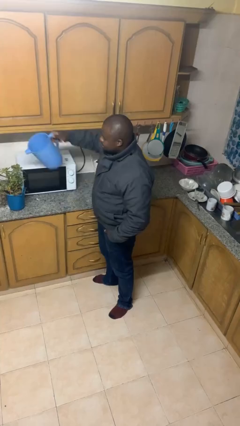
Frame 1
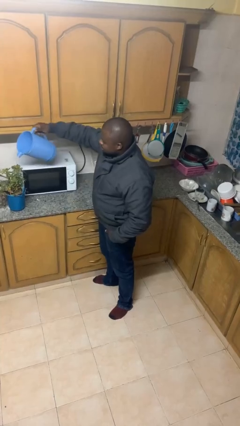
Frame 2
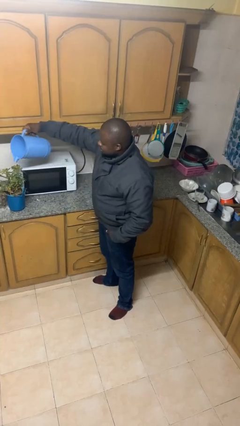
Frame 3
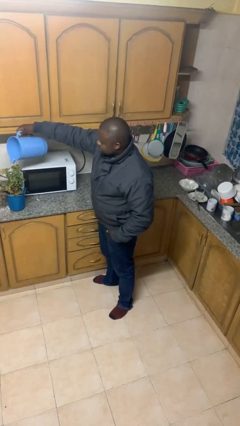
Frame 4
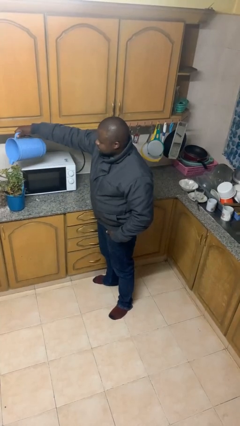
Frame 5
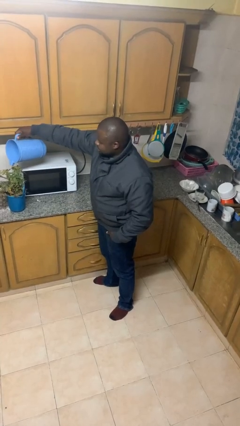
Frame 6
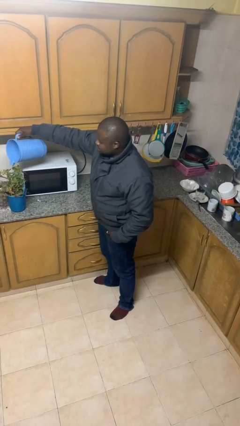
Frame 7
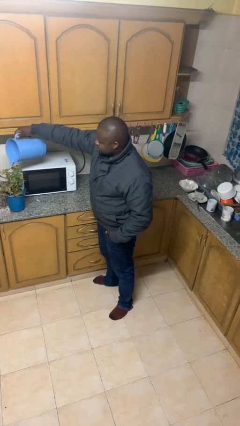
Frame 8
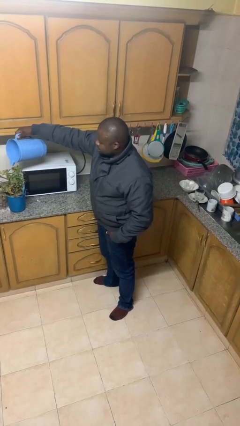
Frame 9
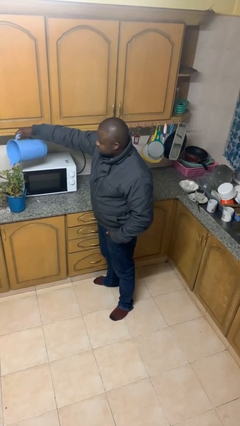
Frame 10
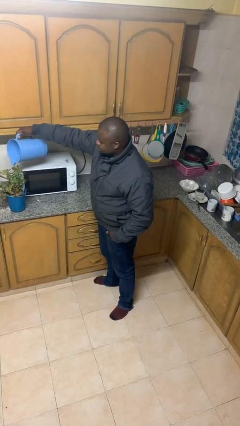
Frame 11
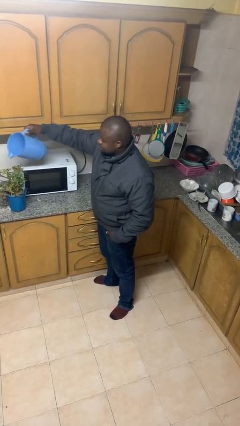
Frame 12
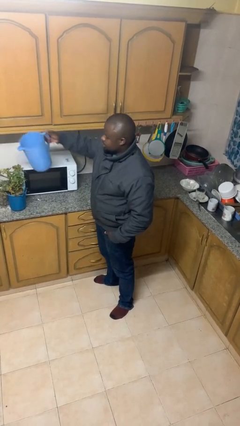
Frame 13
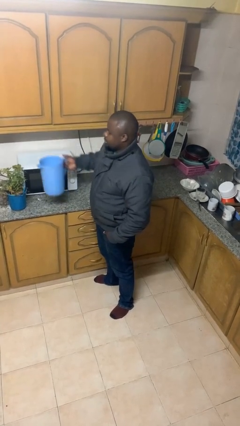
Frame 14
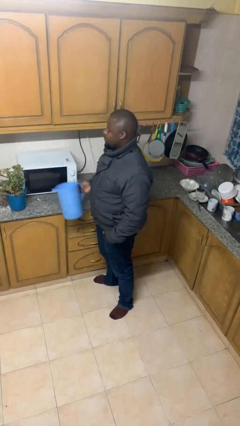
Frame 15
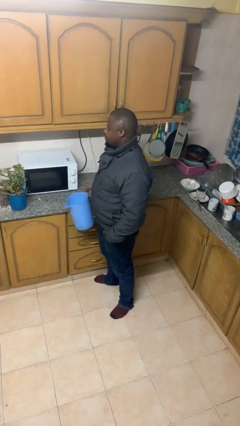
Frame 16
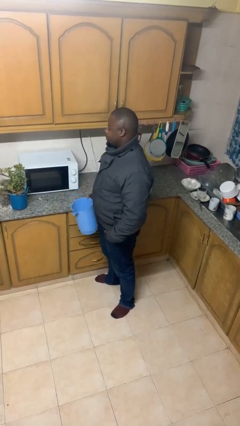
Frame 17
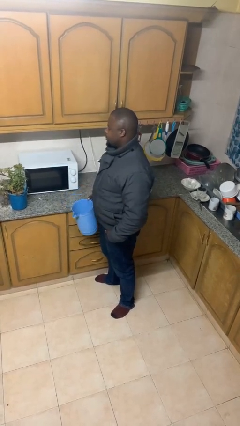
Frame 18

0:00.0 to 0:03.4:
person waters houseplant

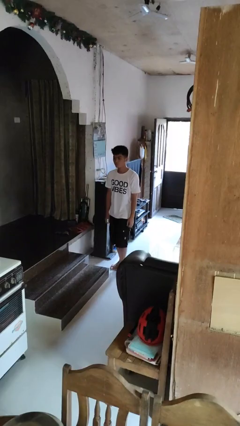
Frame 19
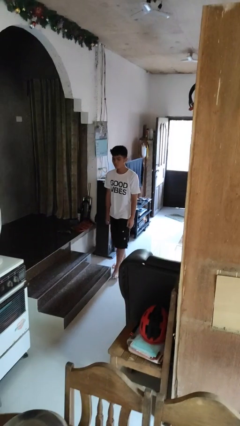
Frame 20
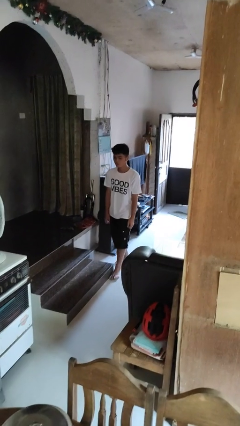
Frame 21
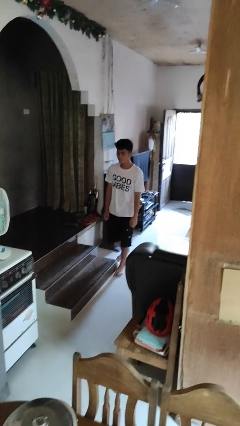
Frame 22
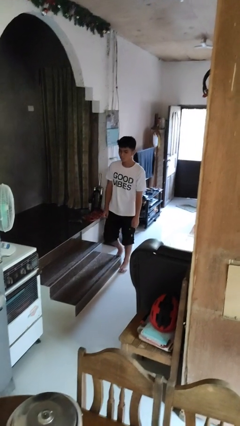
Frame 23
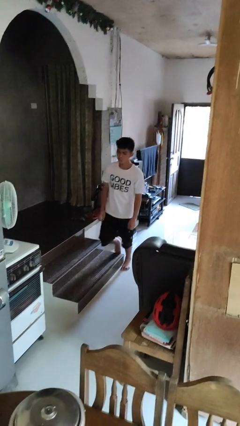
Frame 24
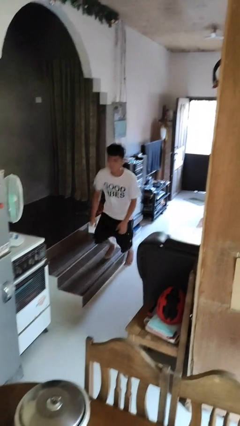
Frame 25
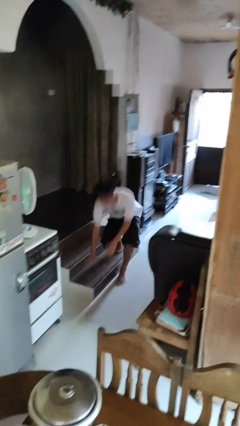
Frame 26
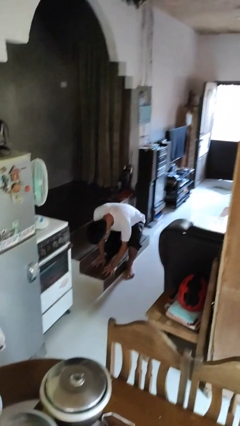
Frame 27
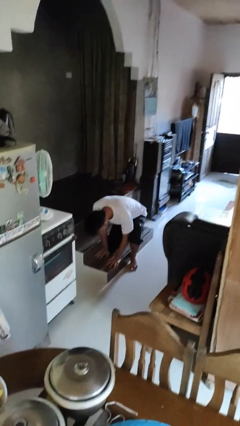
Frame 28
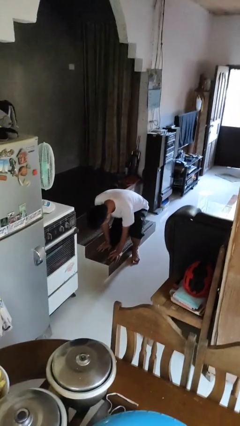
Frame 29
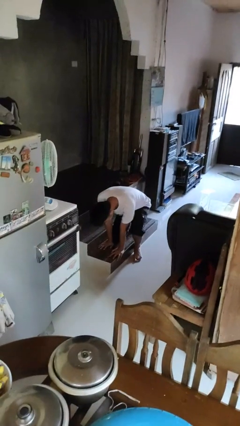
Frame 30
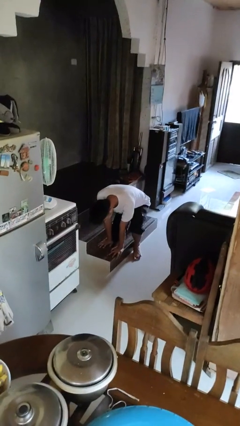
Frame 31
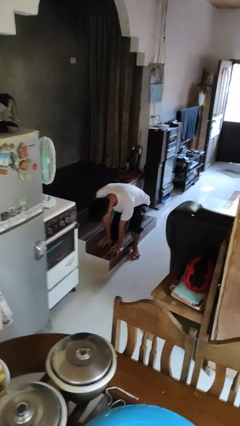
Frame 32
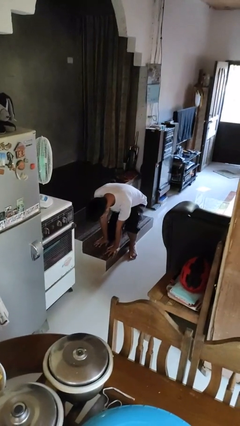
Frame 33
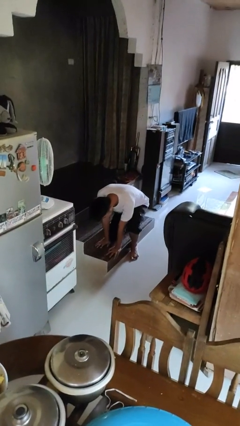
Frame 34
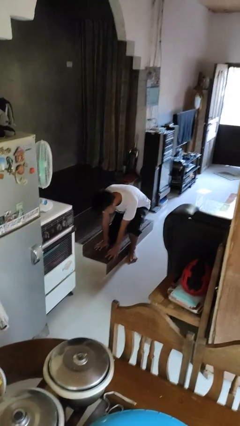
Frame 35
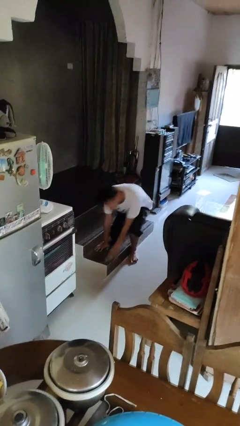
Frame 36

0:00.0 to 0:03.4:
person trips on object on floor

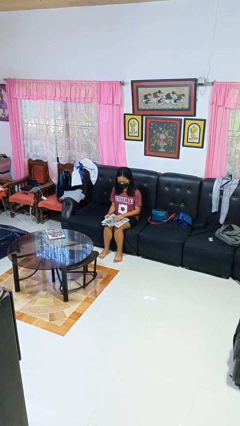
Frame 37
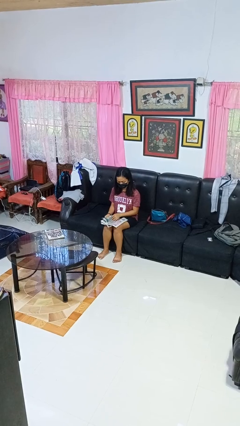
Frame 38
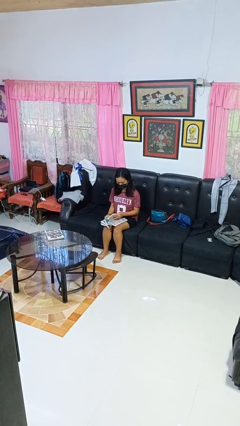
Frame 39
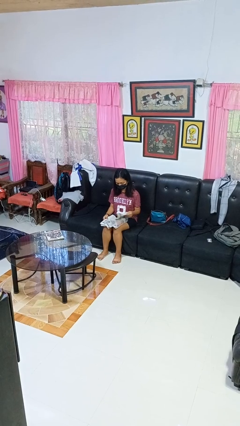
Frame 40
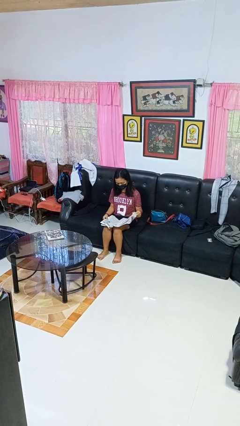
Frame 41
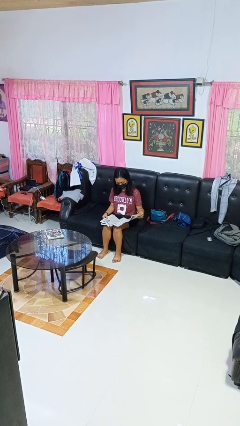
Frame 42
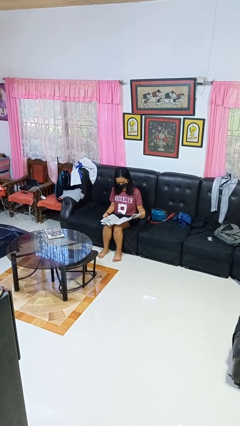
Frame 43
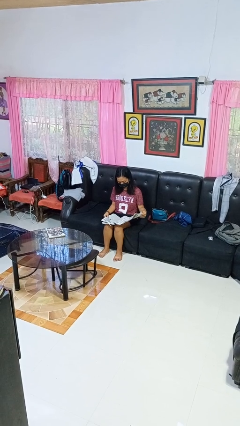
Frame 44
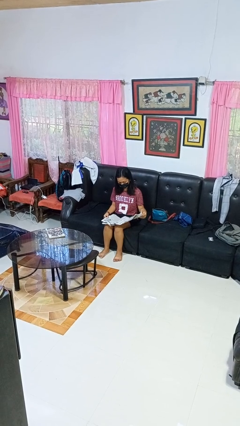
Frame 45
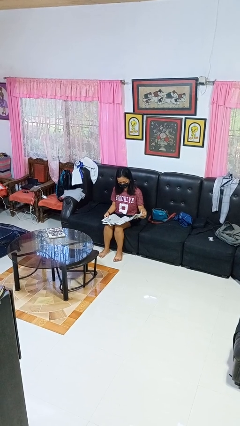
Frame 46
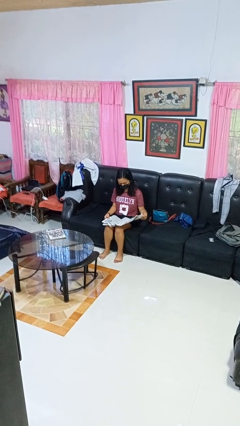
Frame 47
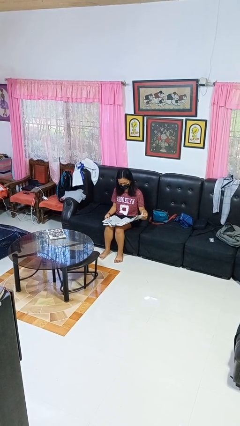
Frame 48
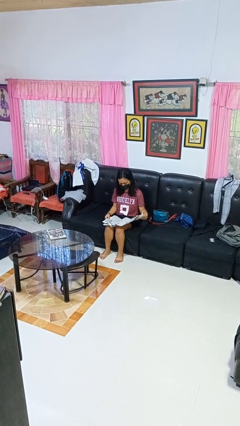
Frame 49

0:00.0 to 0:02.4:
person reads newspaper

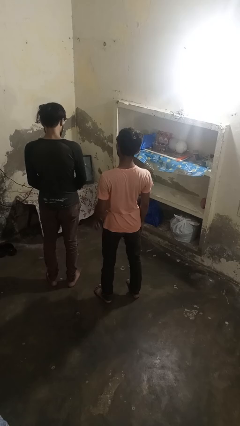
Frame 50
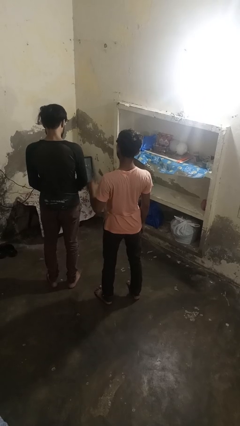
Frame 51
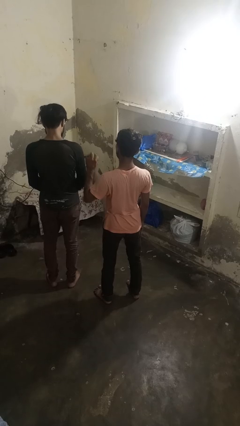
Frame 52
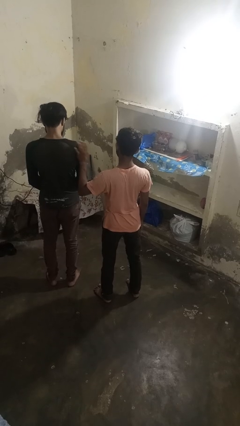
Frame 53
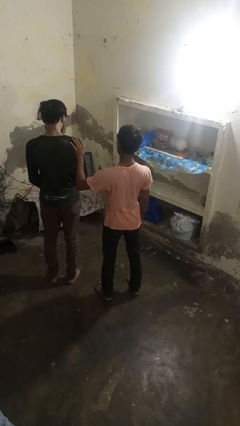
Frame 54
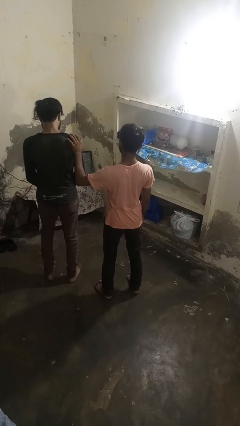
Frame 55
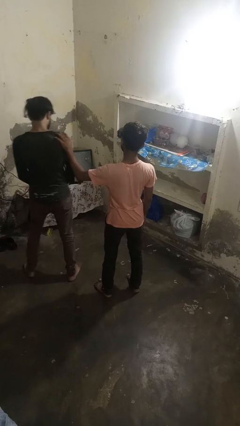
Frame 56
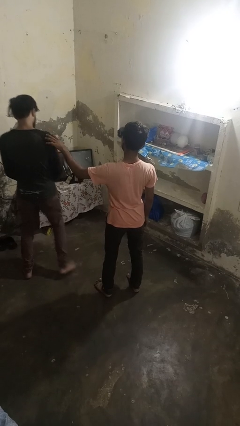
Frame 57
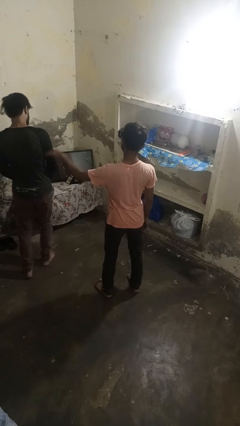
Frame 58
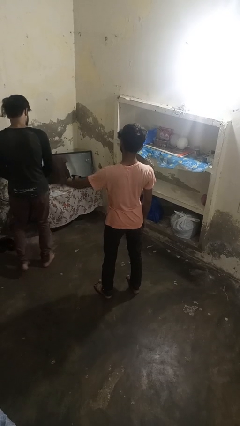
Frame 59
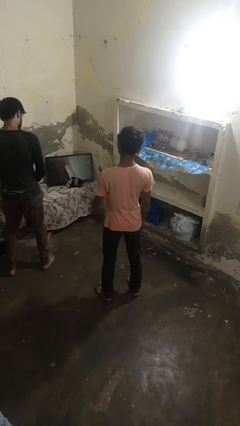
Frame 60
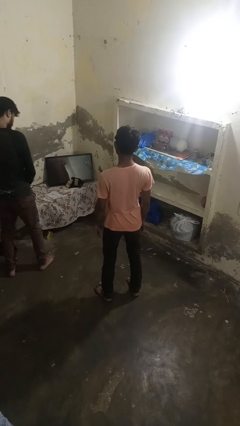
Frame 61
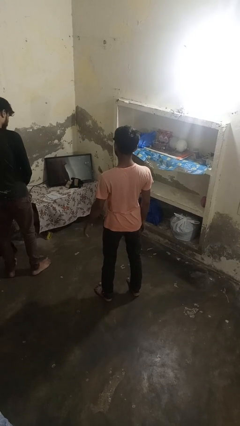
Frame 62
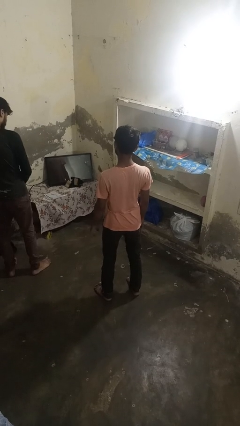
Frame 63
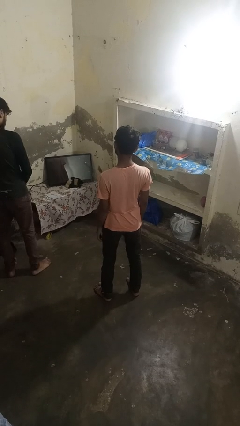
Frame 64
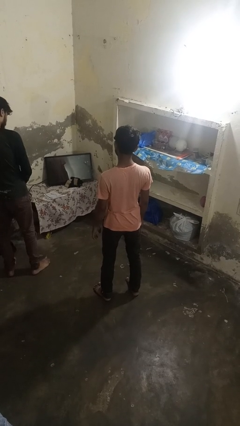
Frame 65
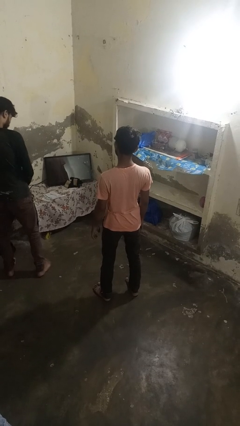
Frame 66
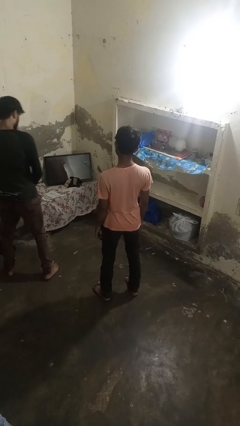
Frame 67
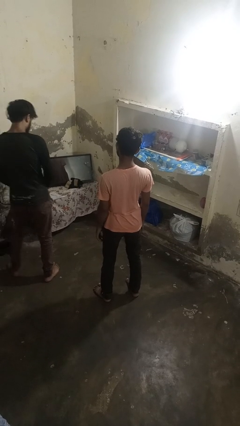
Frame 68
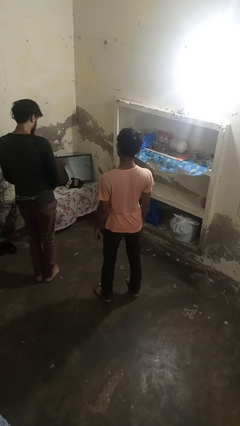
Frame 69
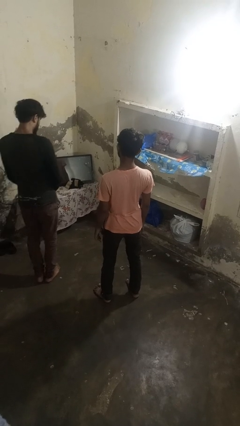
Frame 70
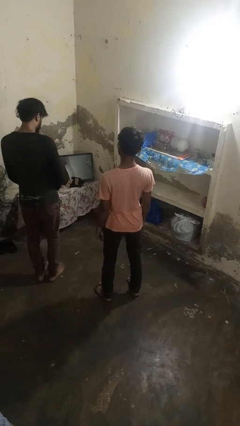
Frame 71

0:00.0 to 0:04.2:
person shoves person

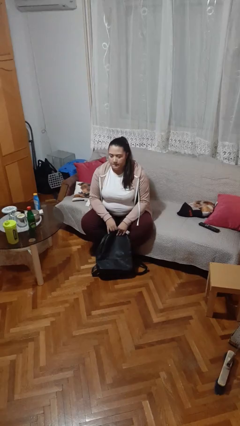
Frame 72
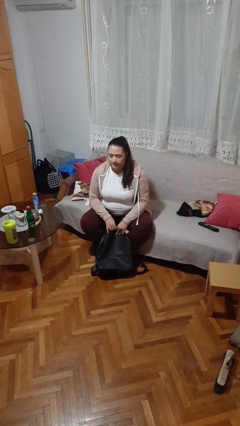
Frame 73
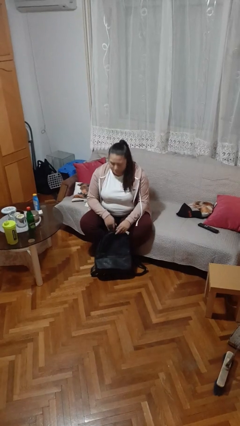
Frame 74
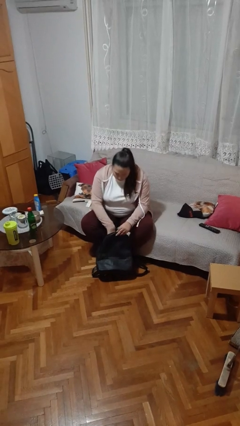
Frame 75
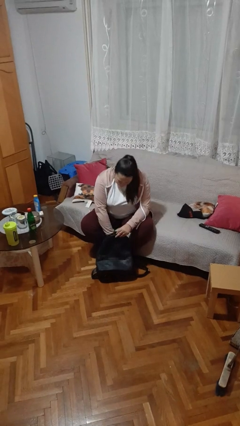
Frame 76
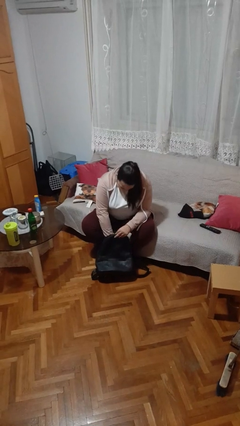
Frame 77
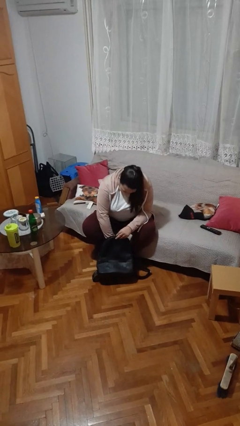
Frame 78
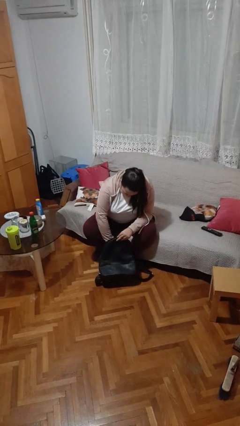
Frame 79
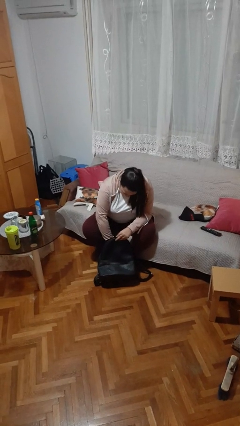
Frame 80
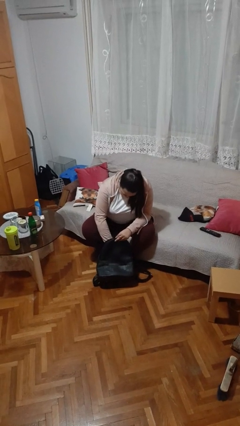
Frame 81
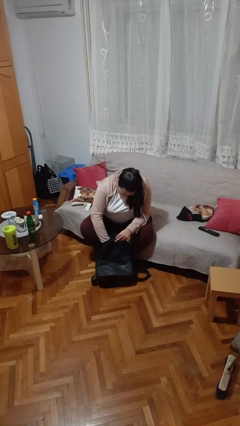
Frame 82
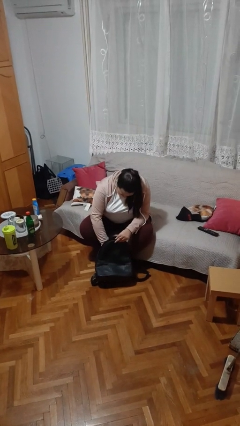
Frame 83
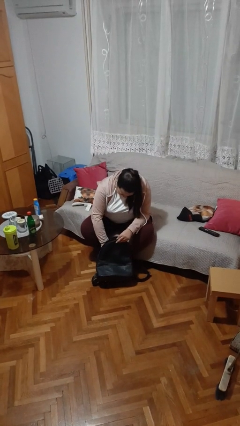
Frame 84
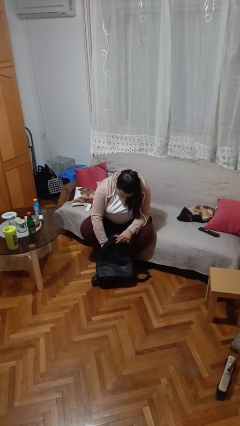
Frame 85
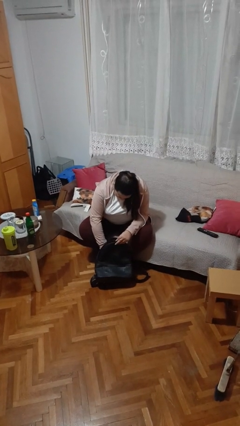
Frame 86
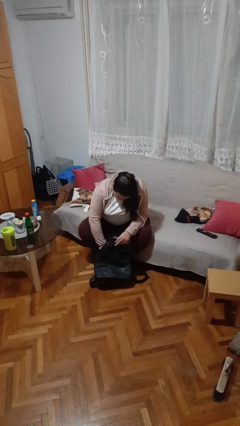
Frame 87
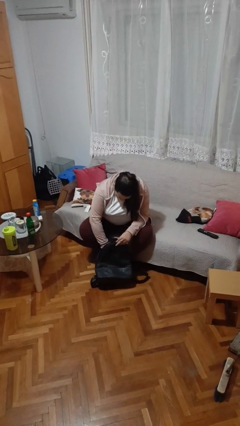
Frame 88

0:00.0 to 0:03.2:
person searches in backpack

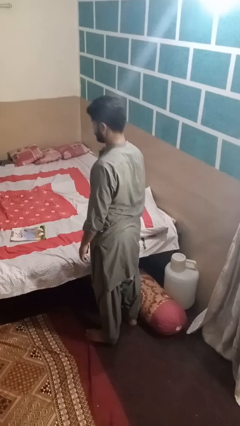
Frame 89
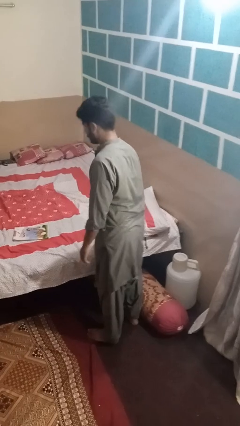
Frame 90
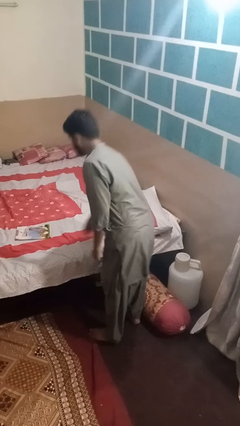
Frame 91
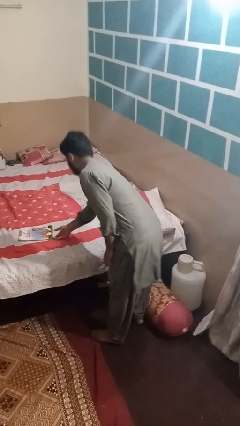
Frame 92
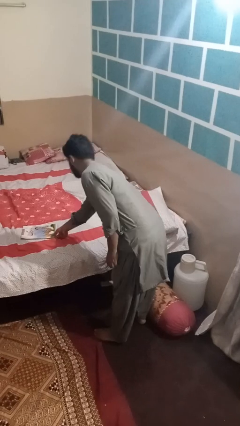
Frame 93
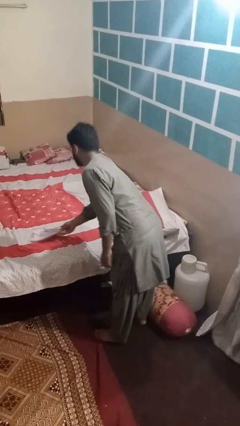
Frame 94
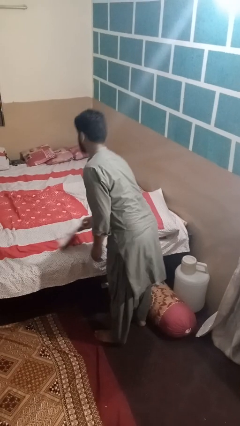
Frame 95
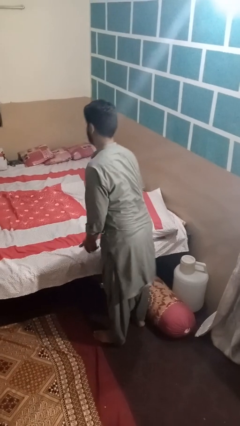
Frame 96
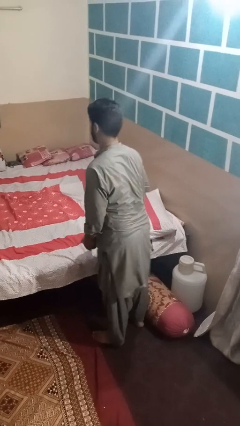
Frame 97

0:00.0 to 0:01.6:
person picks up object from bed
